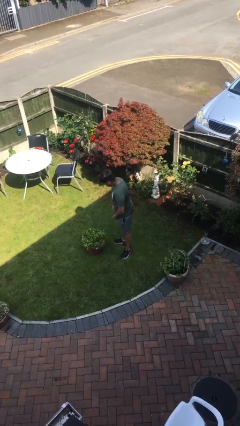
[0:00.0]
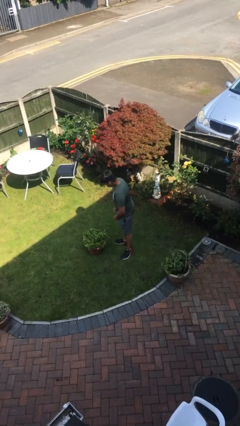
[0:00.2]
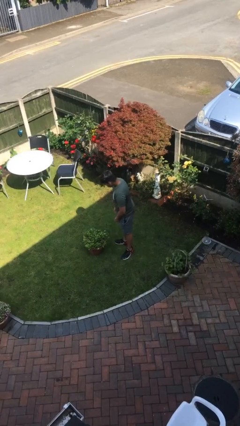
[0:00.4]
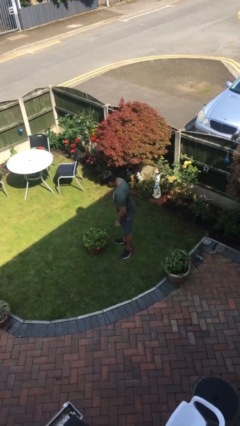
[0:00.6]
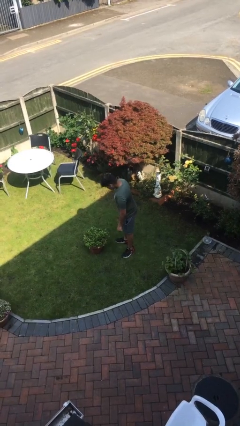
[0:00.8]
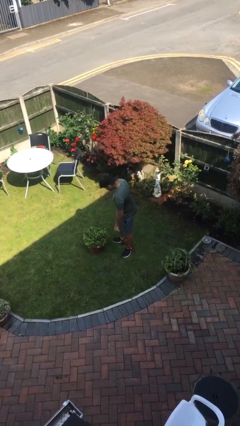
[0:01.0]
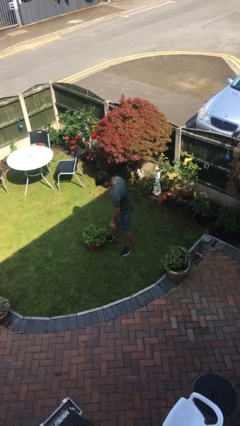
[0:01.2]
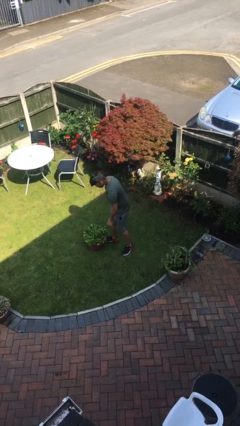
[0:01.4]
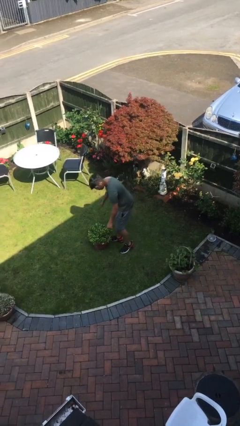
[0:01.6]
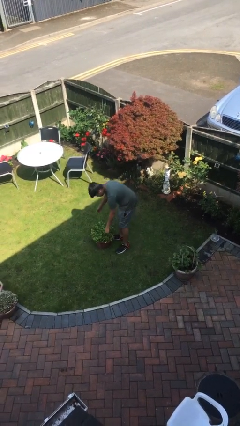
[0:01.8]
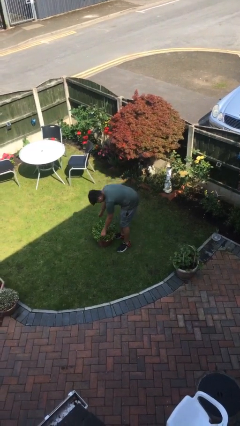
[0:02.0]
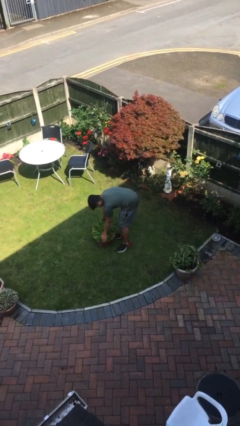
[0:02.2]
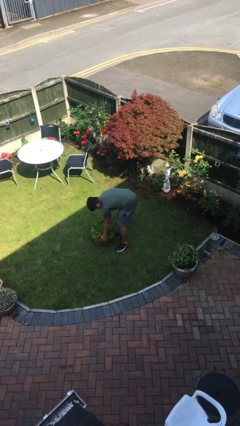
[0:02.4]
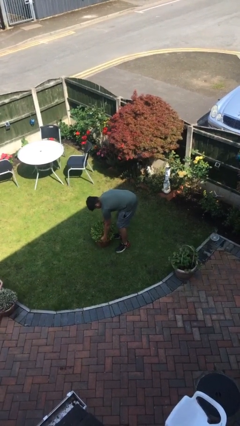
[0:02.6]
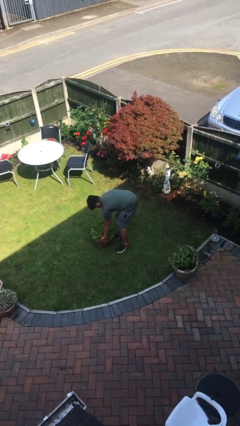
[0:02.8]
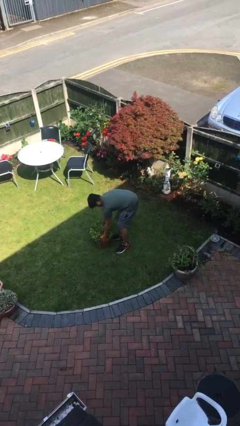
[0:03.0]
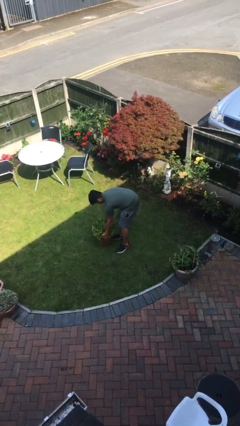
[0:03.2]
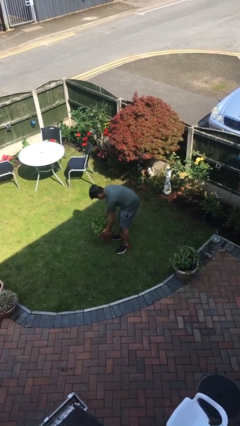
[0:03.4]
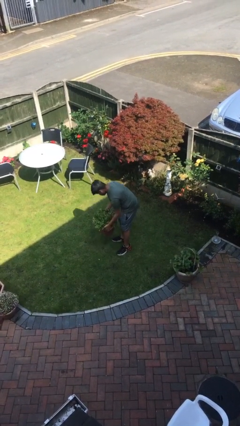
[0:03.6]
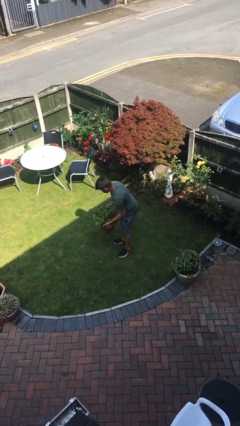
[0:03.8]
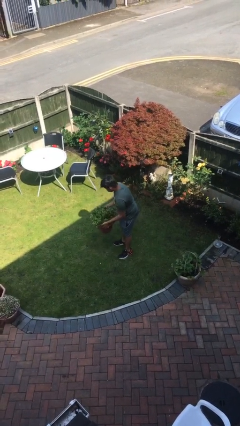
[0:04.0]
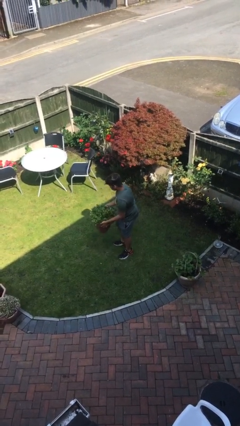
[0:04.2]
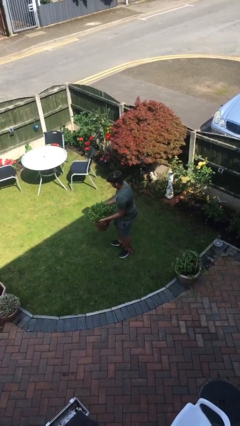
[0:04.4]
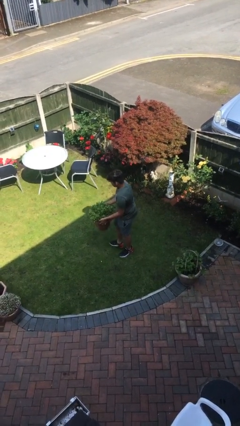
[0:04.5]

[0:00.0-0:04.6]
person picks up object from floor

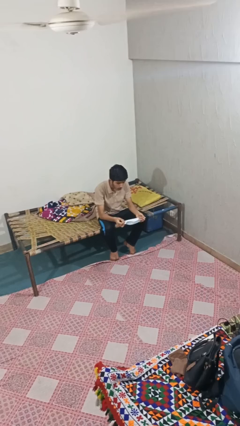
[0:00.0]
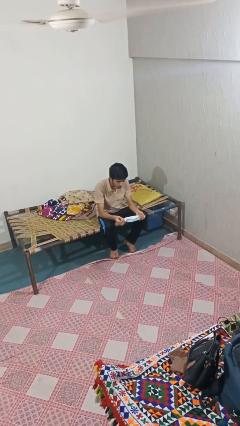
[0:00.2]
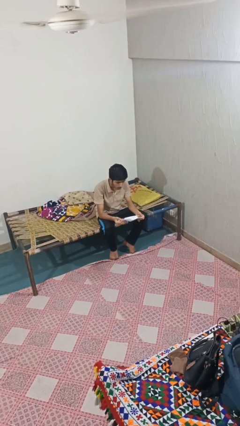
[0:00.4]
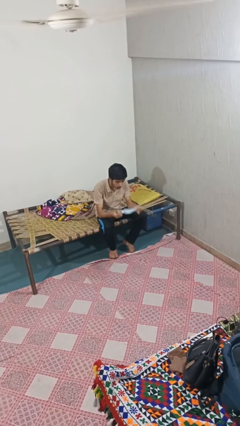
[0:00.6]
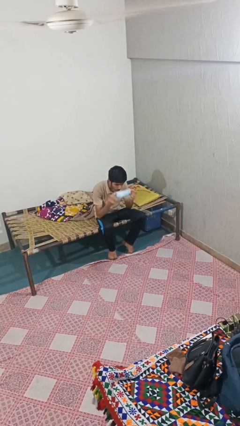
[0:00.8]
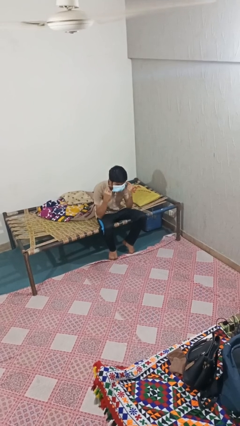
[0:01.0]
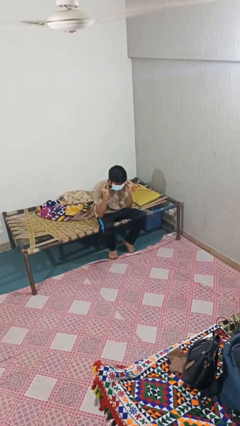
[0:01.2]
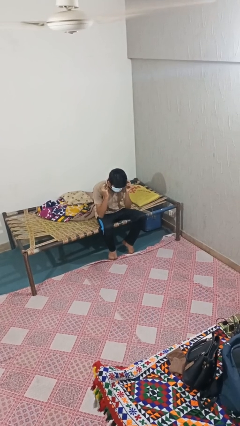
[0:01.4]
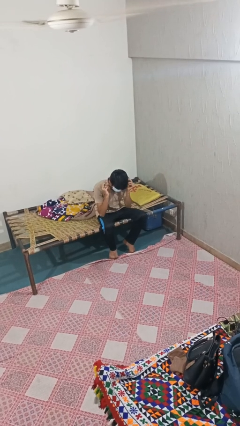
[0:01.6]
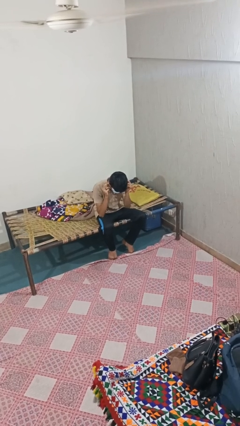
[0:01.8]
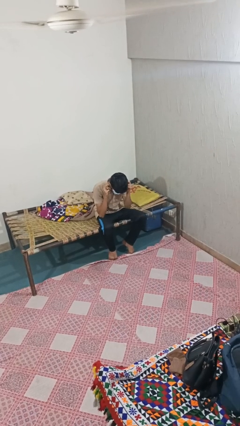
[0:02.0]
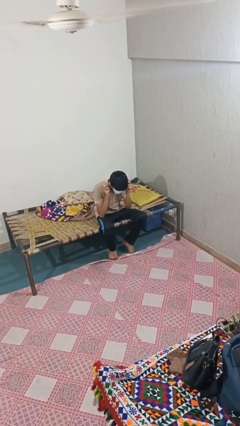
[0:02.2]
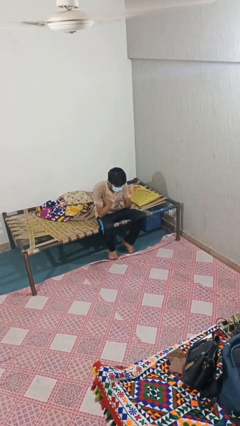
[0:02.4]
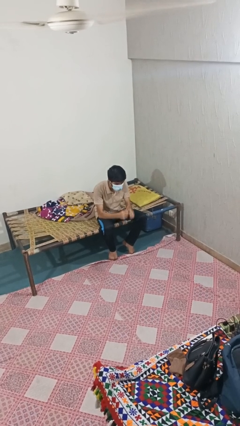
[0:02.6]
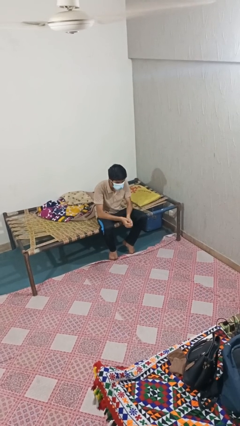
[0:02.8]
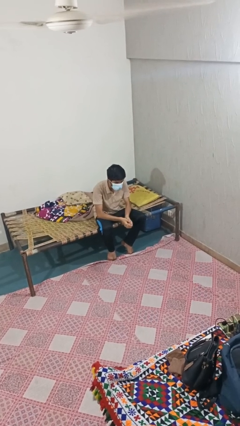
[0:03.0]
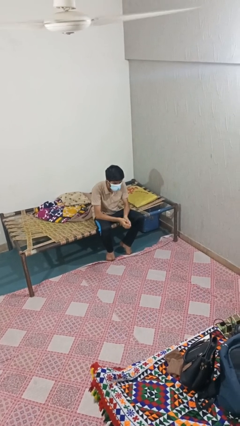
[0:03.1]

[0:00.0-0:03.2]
person puts on facemask

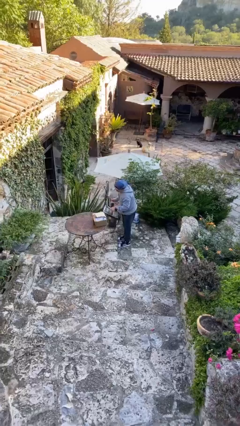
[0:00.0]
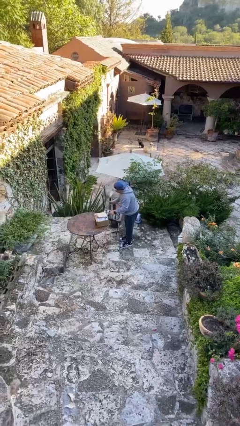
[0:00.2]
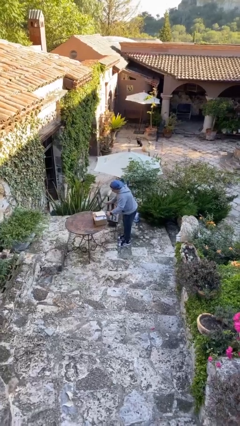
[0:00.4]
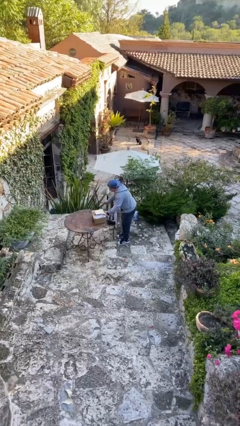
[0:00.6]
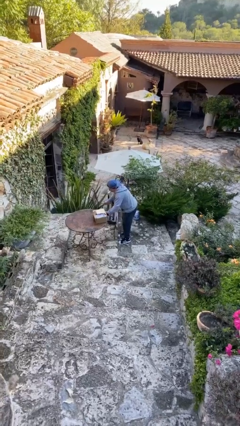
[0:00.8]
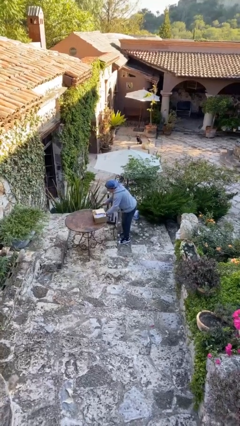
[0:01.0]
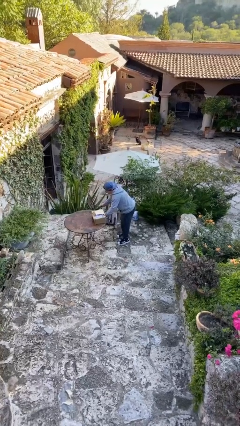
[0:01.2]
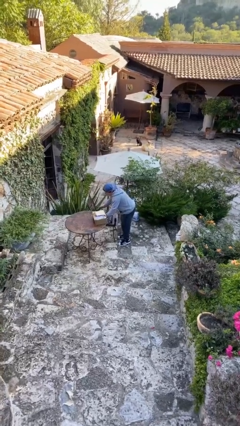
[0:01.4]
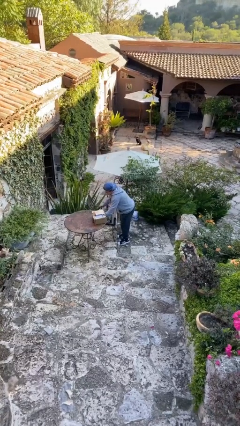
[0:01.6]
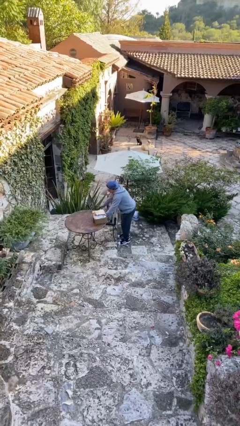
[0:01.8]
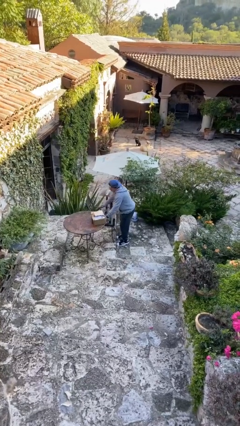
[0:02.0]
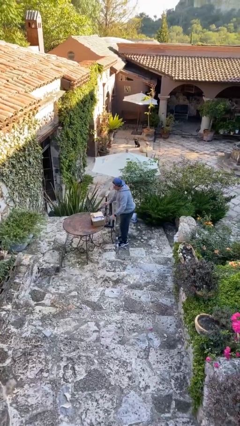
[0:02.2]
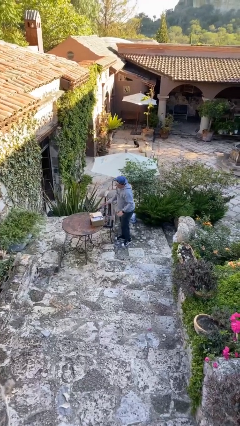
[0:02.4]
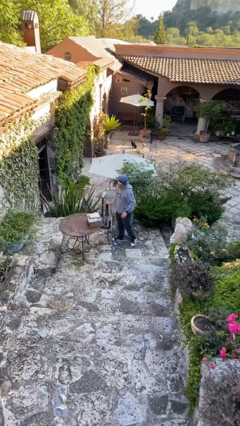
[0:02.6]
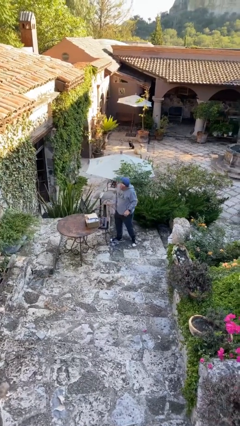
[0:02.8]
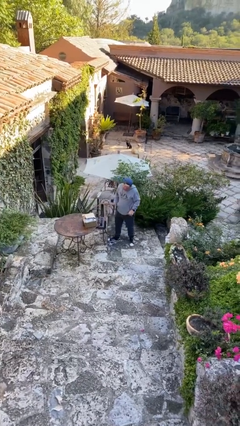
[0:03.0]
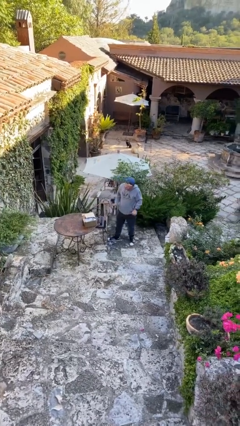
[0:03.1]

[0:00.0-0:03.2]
person puts down object on floor

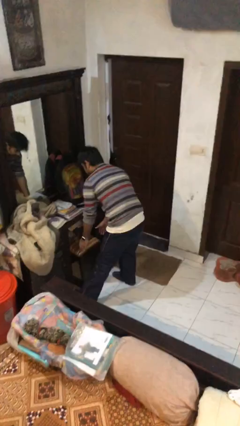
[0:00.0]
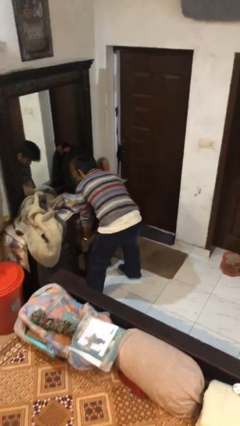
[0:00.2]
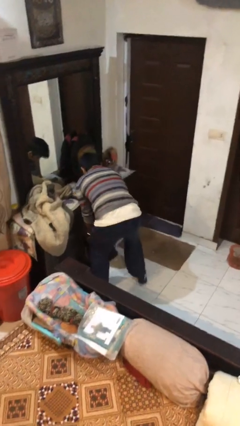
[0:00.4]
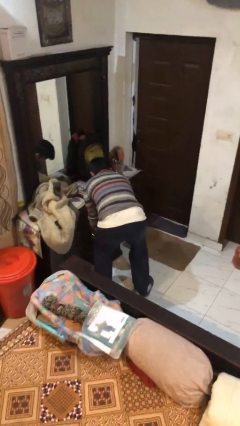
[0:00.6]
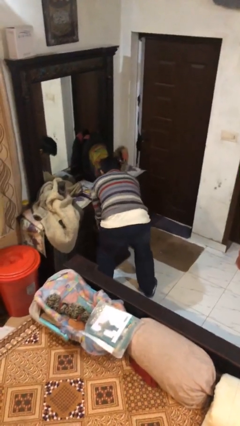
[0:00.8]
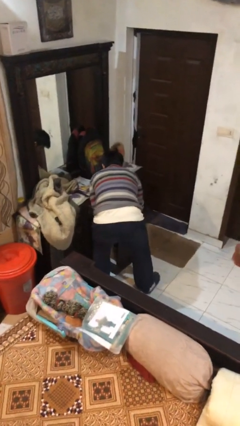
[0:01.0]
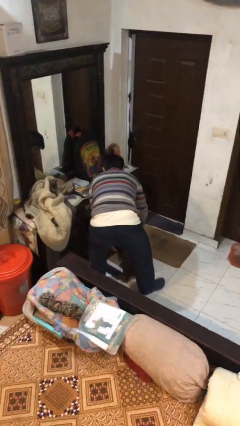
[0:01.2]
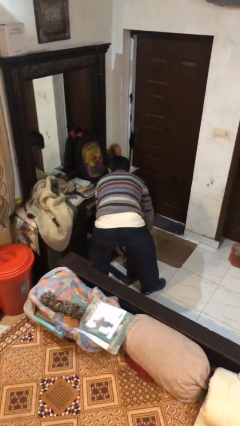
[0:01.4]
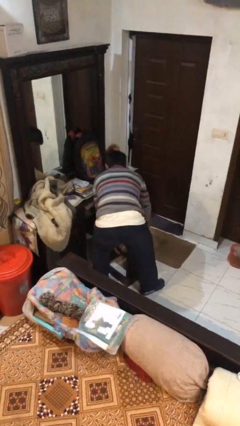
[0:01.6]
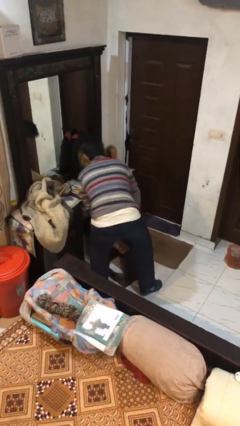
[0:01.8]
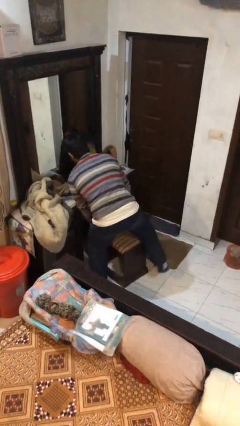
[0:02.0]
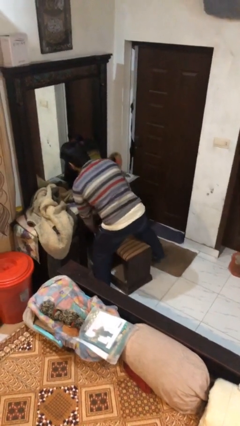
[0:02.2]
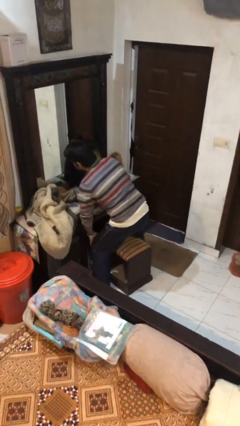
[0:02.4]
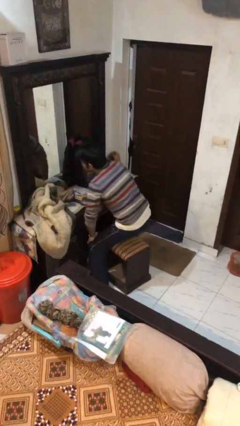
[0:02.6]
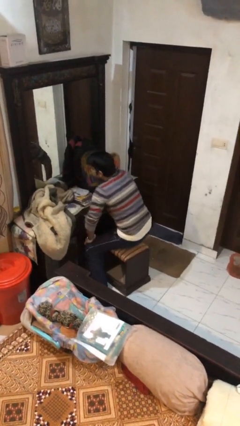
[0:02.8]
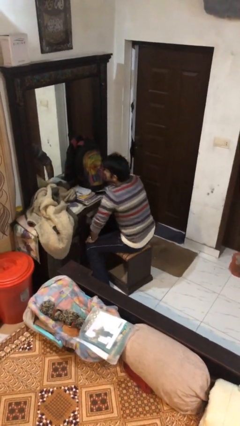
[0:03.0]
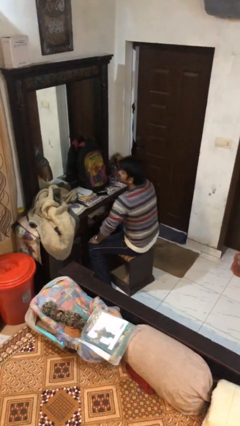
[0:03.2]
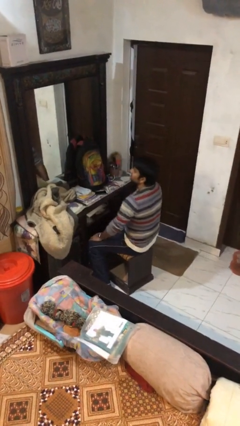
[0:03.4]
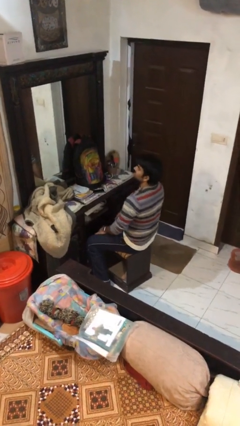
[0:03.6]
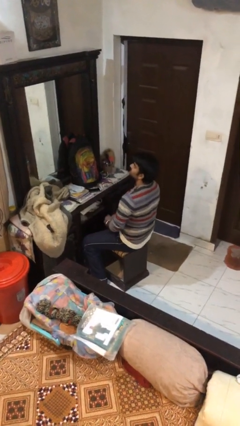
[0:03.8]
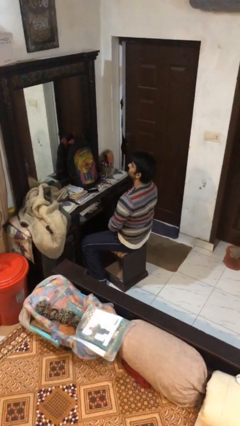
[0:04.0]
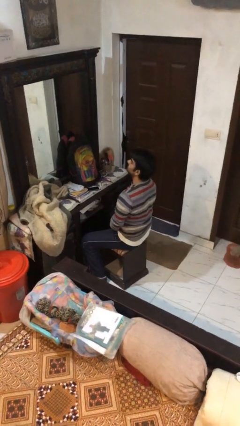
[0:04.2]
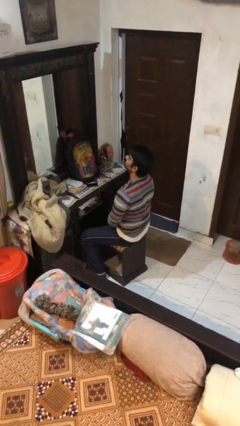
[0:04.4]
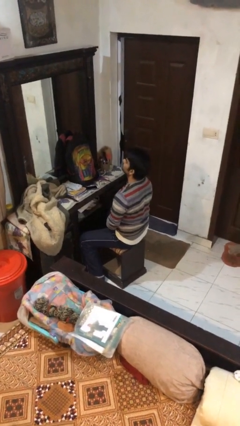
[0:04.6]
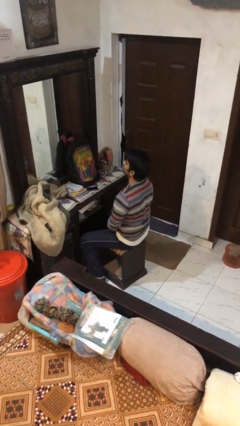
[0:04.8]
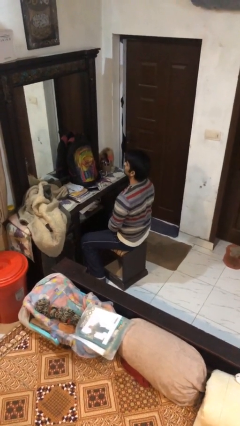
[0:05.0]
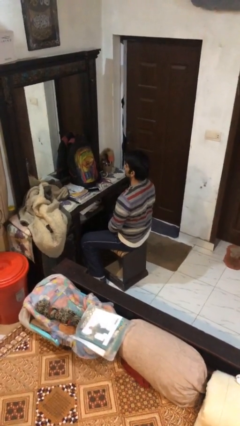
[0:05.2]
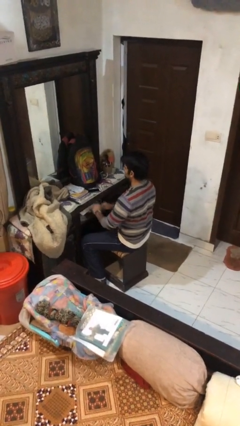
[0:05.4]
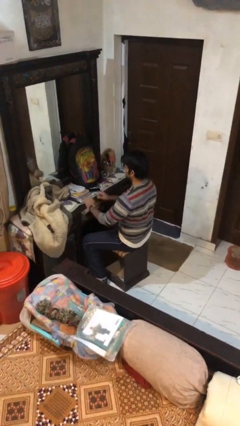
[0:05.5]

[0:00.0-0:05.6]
person sits down

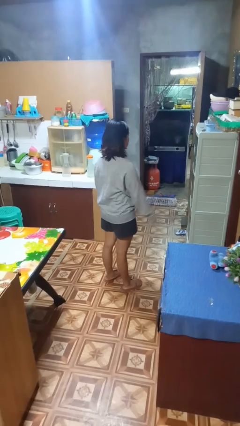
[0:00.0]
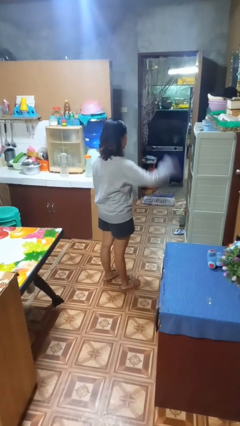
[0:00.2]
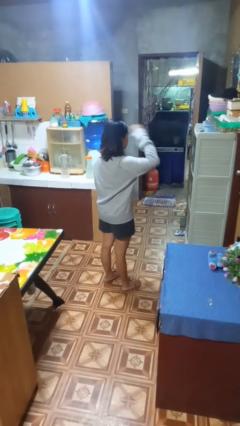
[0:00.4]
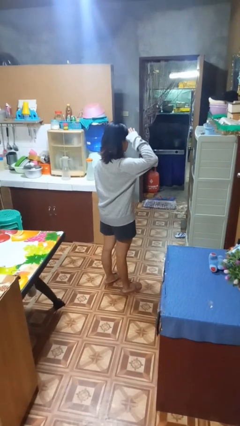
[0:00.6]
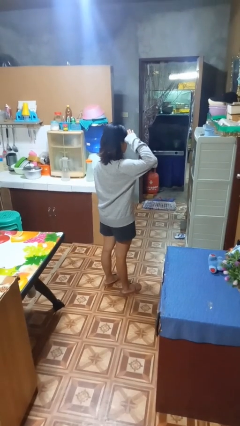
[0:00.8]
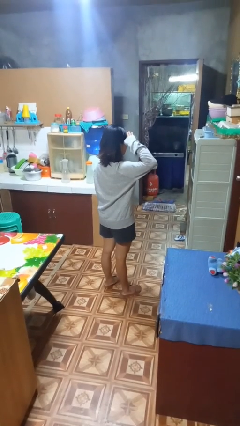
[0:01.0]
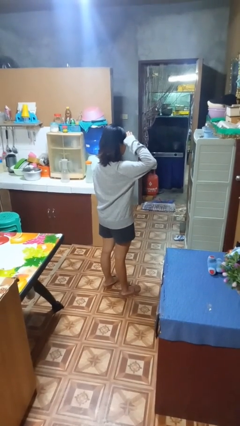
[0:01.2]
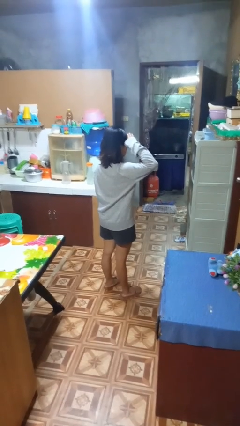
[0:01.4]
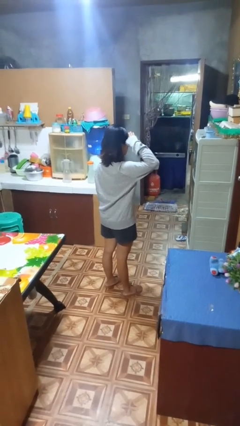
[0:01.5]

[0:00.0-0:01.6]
person salutes
